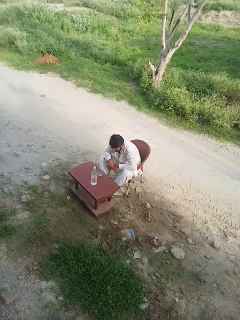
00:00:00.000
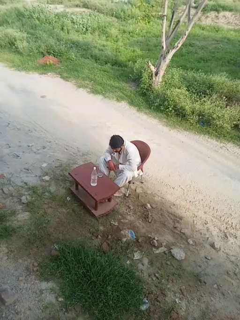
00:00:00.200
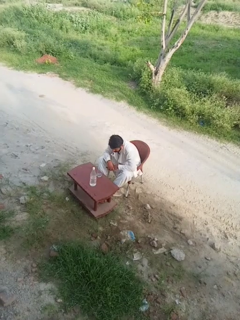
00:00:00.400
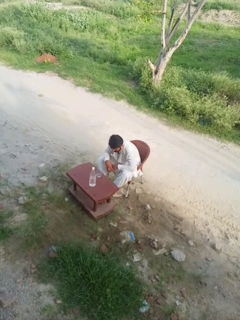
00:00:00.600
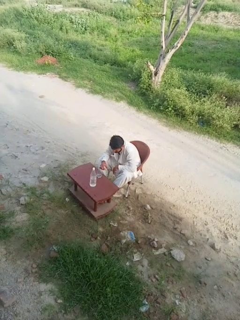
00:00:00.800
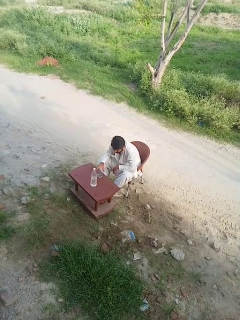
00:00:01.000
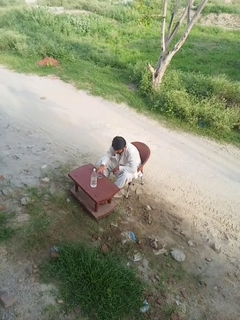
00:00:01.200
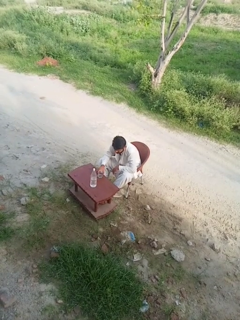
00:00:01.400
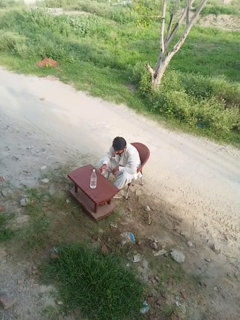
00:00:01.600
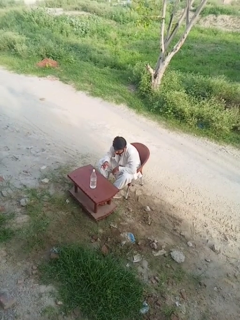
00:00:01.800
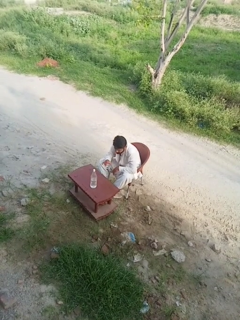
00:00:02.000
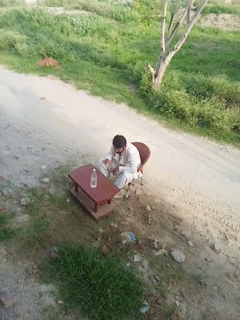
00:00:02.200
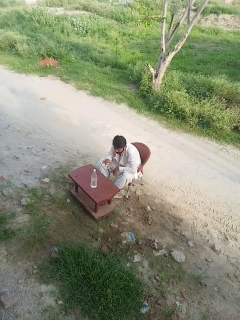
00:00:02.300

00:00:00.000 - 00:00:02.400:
person picks up object from table

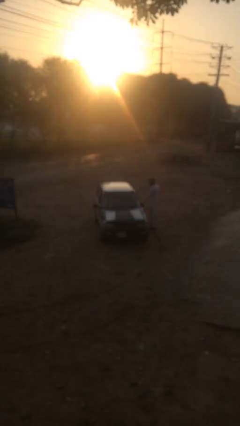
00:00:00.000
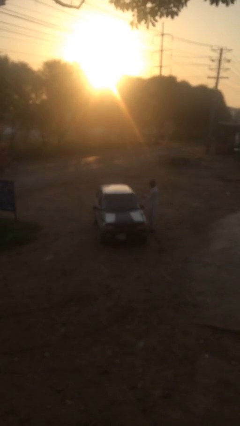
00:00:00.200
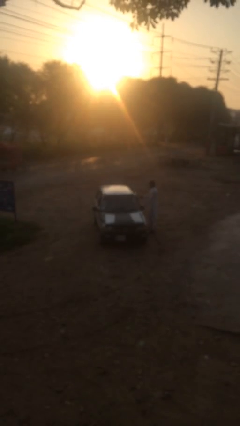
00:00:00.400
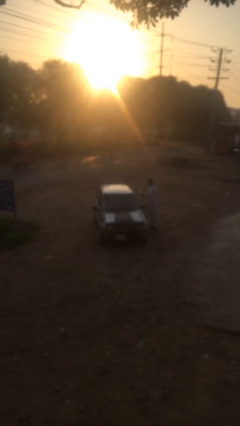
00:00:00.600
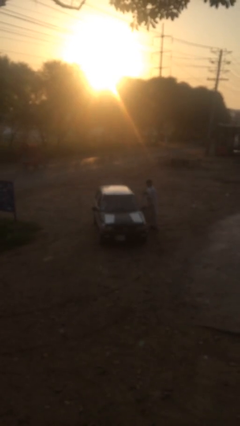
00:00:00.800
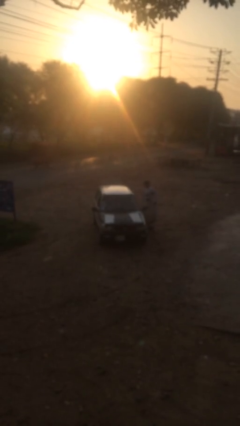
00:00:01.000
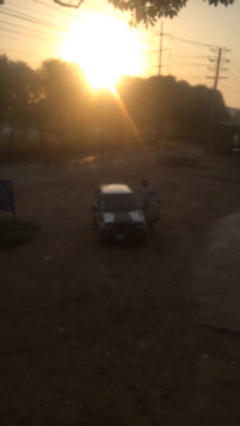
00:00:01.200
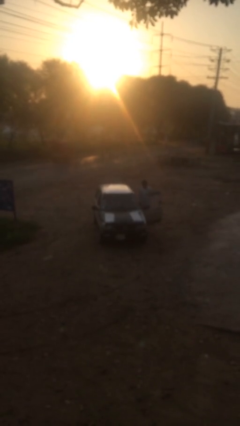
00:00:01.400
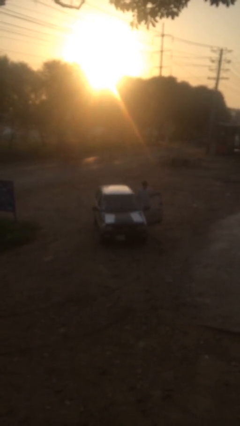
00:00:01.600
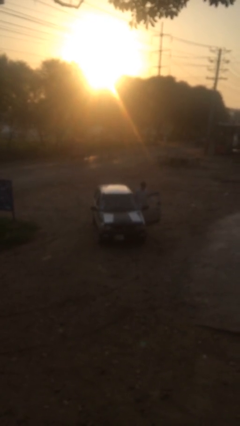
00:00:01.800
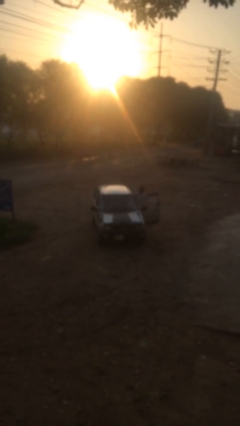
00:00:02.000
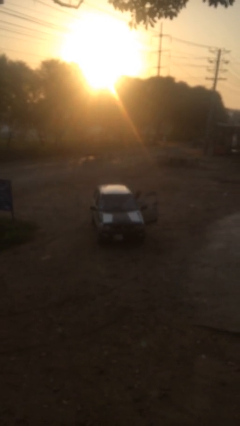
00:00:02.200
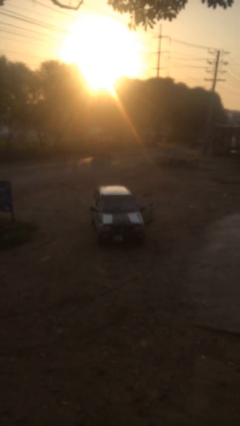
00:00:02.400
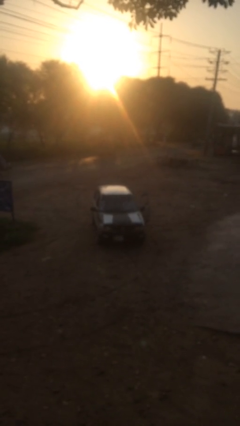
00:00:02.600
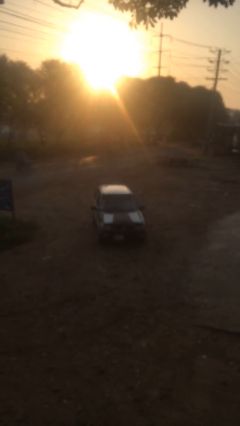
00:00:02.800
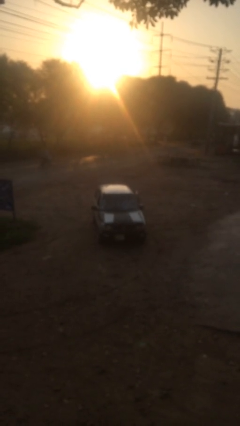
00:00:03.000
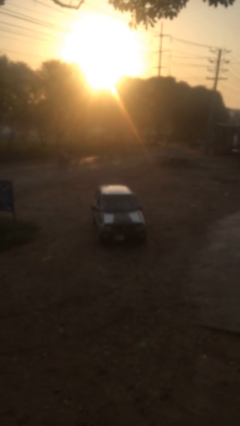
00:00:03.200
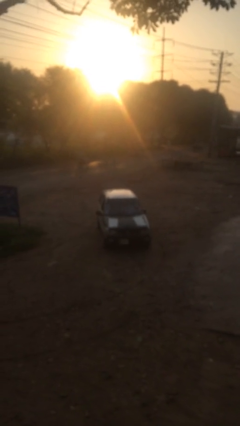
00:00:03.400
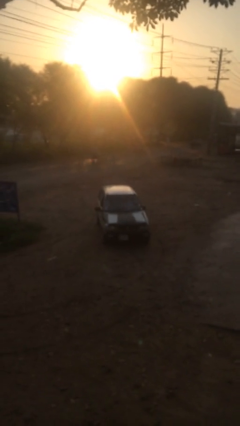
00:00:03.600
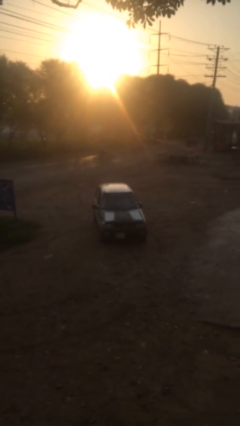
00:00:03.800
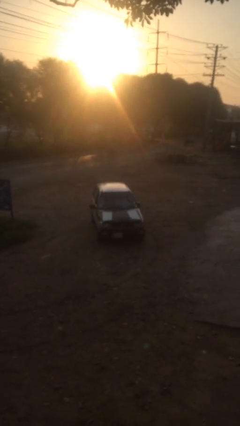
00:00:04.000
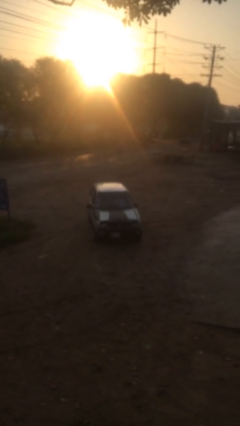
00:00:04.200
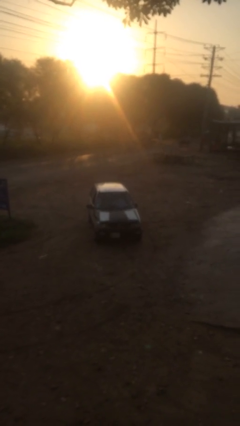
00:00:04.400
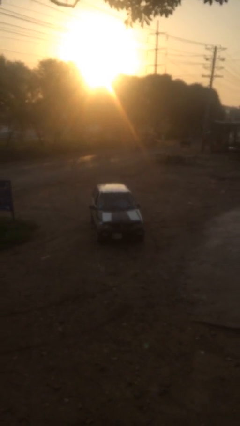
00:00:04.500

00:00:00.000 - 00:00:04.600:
car picks up person

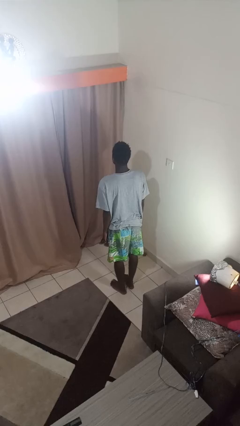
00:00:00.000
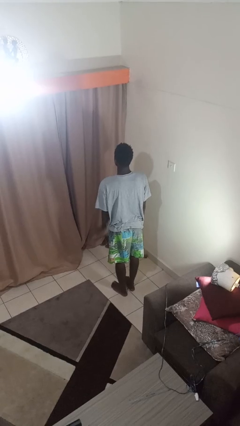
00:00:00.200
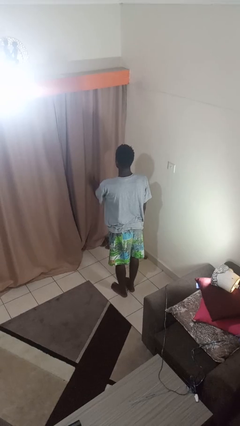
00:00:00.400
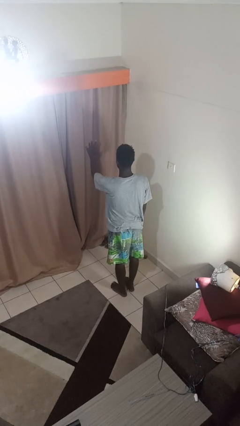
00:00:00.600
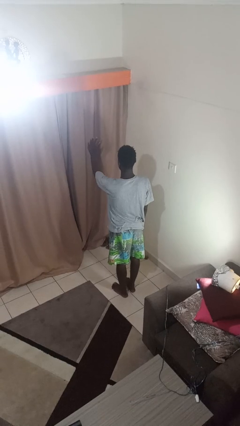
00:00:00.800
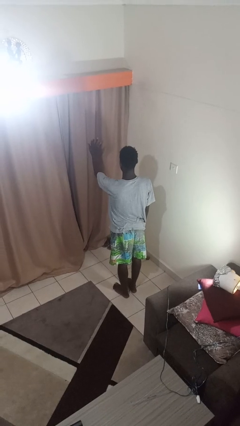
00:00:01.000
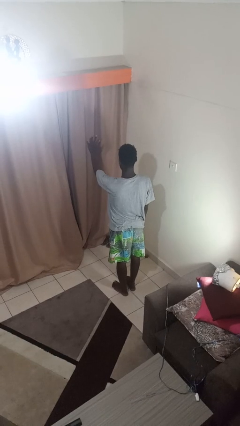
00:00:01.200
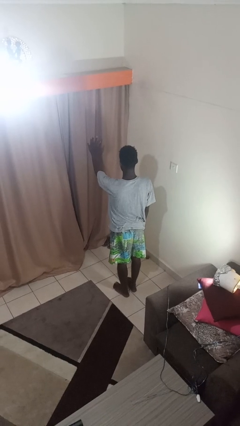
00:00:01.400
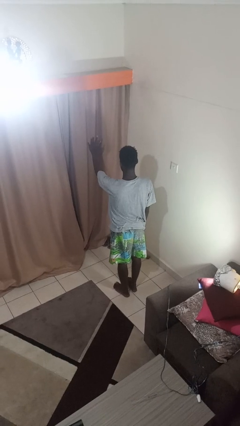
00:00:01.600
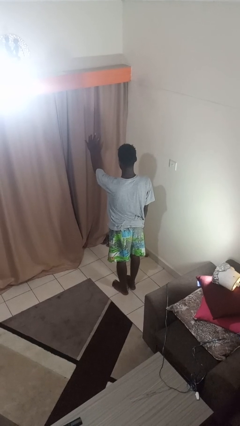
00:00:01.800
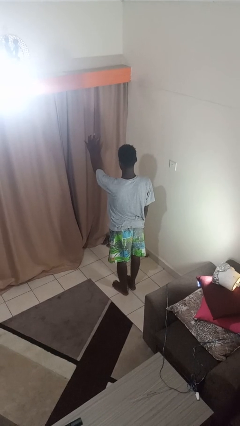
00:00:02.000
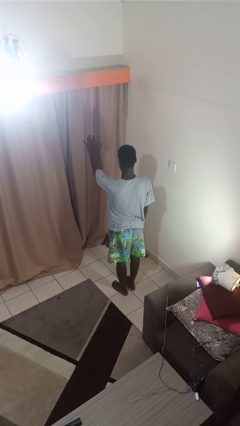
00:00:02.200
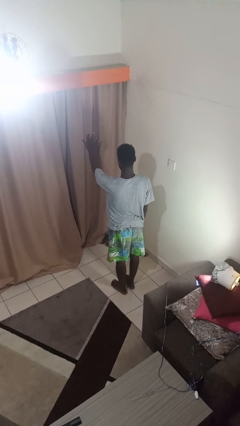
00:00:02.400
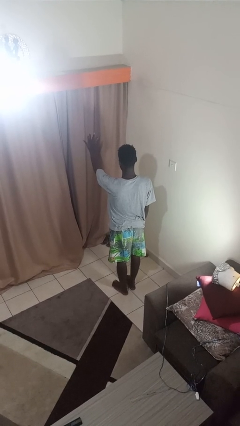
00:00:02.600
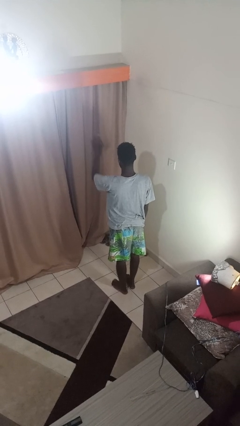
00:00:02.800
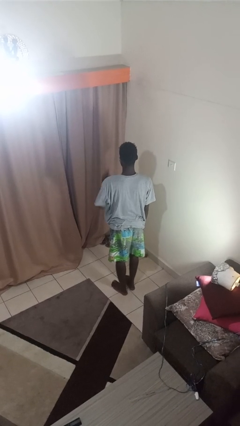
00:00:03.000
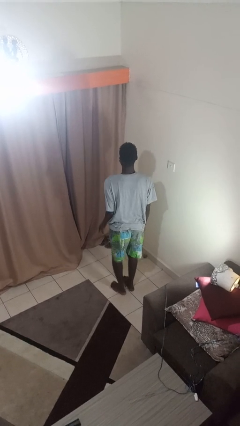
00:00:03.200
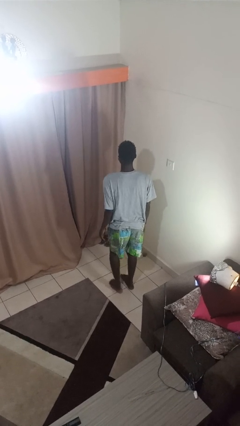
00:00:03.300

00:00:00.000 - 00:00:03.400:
person gestures number five

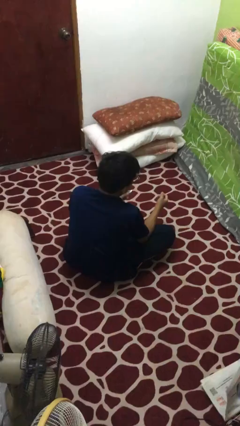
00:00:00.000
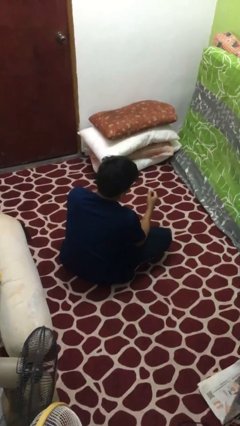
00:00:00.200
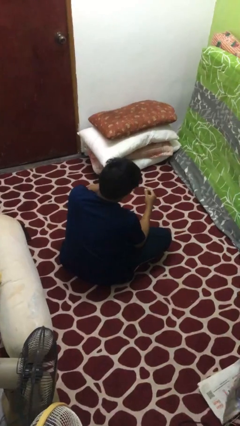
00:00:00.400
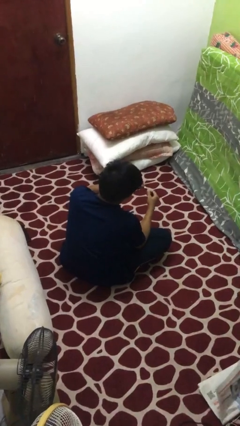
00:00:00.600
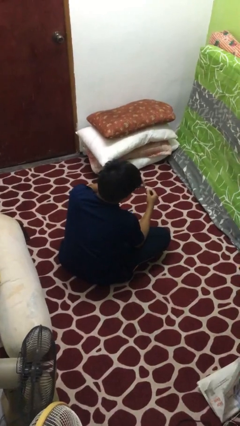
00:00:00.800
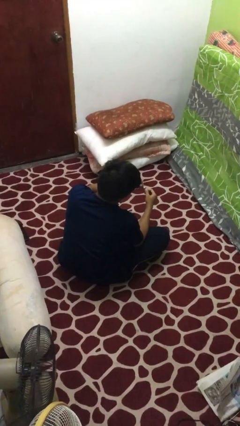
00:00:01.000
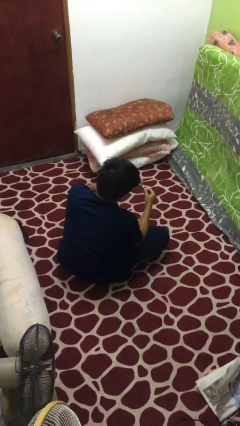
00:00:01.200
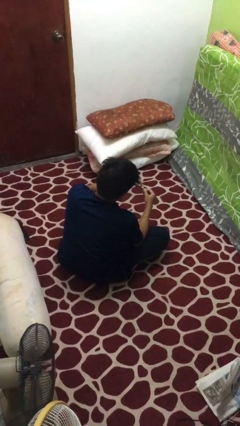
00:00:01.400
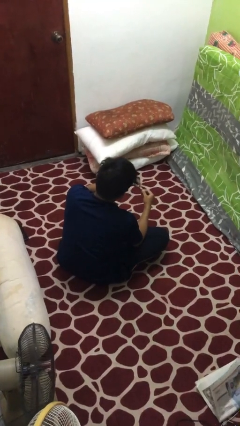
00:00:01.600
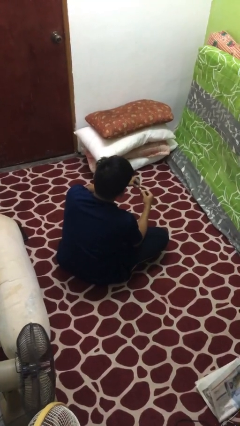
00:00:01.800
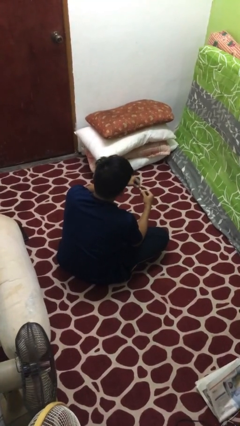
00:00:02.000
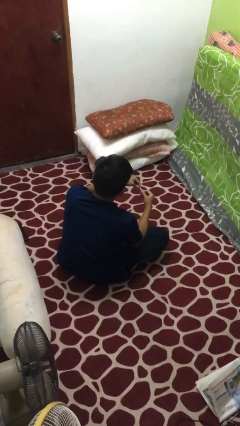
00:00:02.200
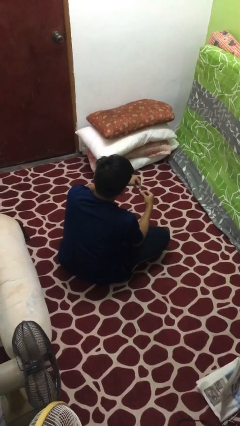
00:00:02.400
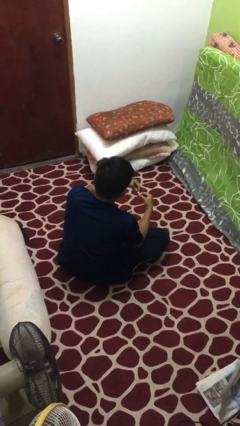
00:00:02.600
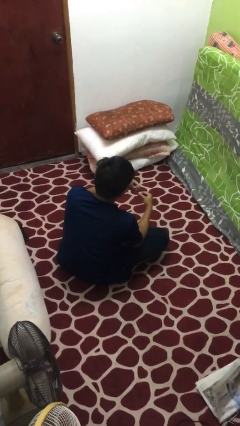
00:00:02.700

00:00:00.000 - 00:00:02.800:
person clips fingernails

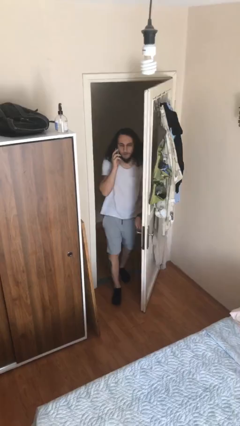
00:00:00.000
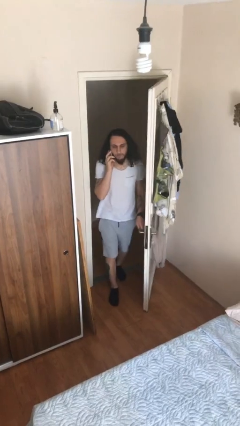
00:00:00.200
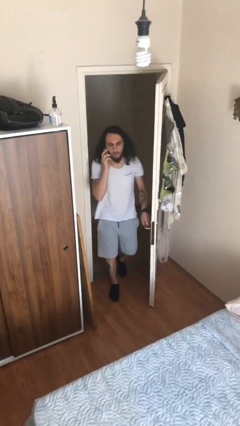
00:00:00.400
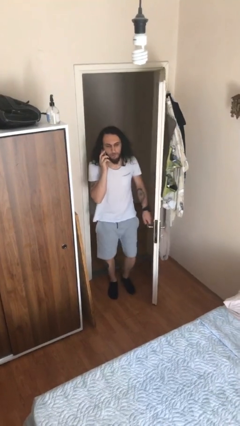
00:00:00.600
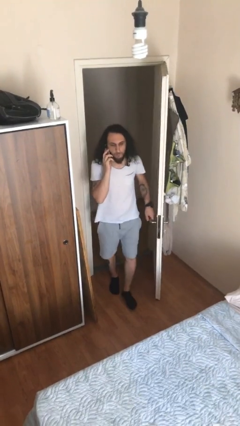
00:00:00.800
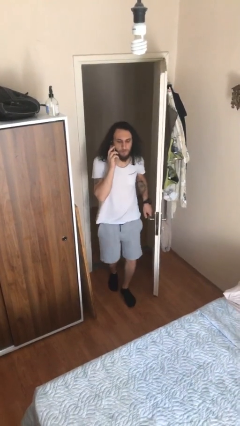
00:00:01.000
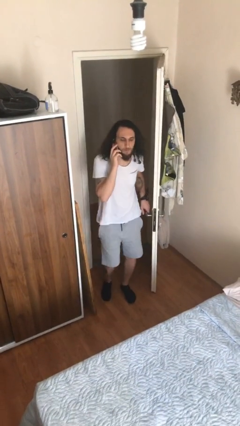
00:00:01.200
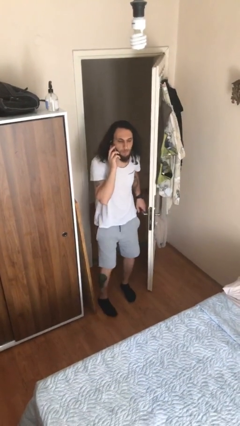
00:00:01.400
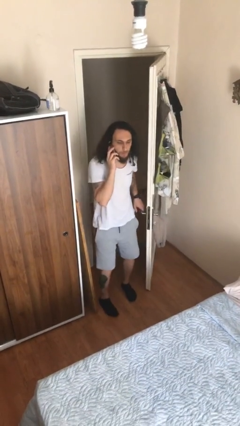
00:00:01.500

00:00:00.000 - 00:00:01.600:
person enters scene through structure

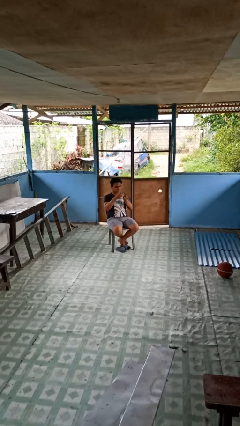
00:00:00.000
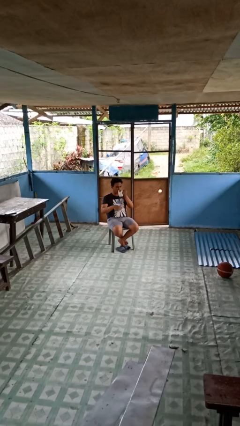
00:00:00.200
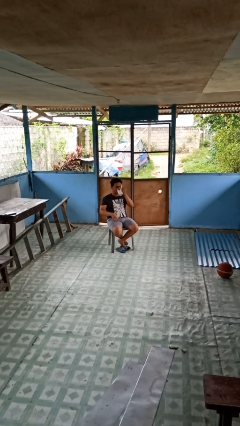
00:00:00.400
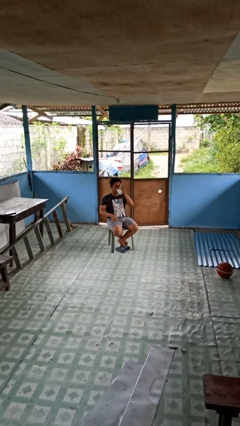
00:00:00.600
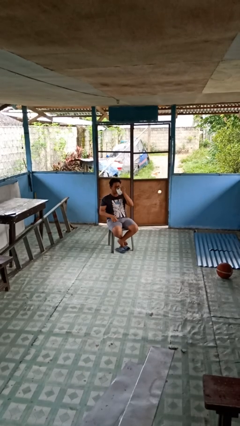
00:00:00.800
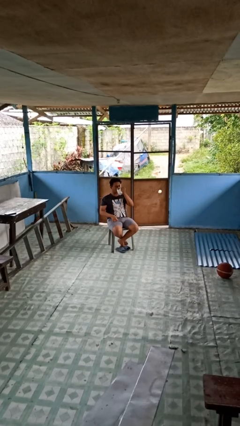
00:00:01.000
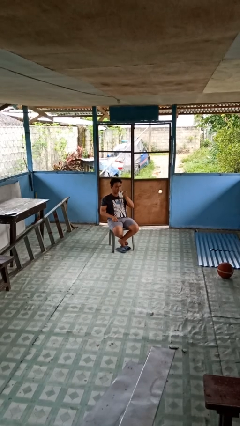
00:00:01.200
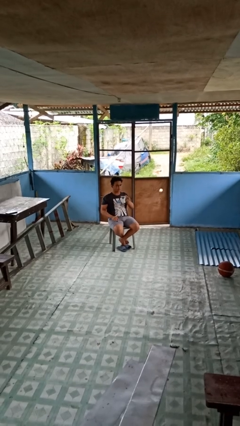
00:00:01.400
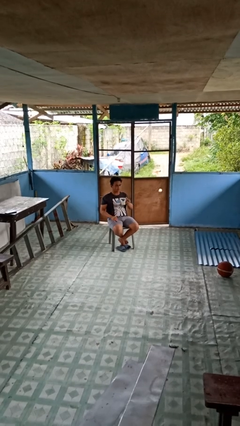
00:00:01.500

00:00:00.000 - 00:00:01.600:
person drinks from mug

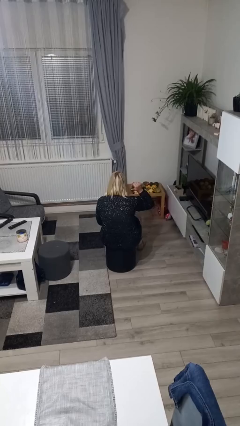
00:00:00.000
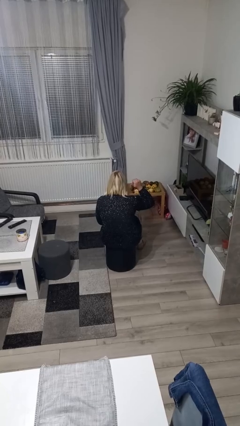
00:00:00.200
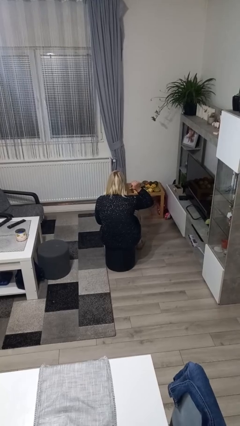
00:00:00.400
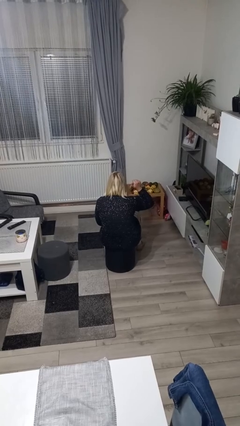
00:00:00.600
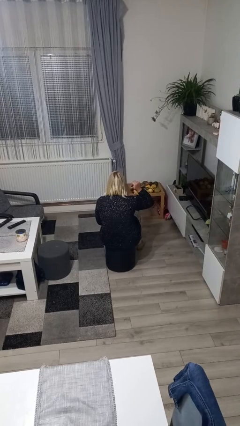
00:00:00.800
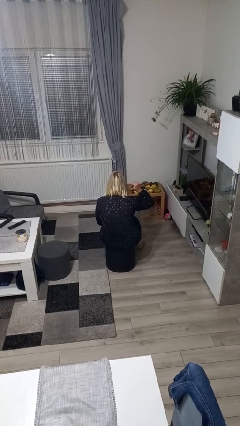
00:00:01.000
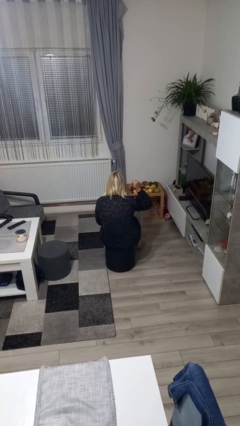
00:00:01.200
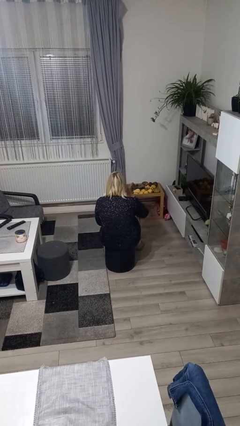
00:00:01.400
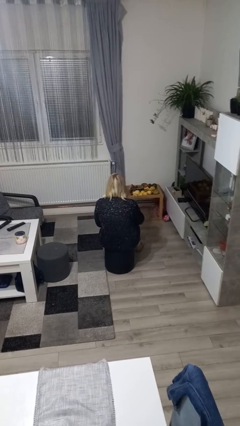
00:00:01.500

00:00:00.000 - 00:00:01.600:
person gestures behind me
